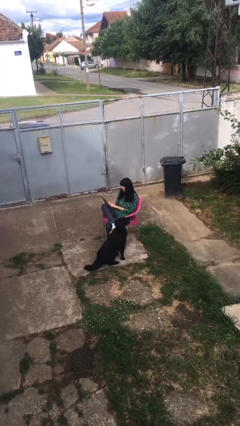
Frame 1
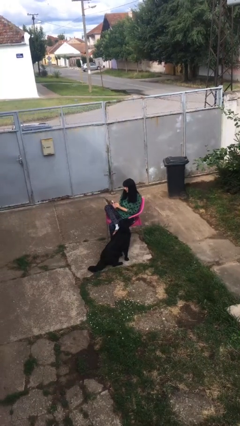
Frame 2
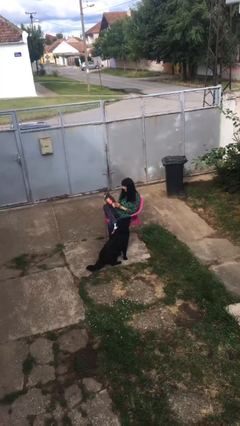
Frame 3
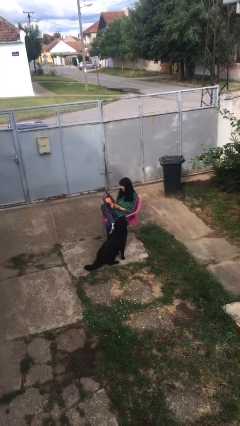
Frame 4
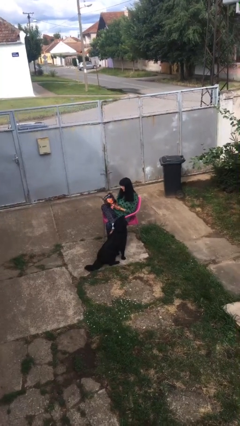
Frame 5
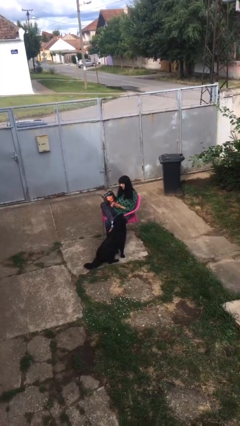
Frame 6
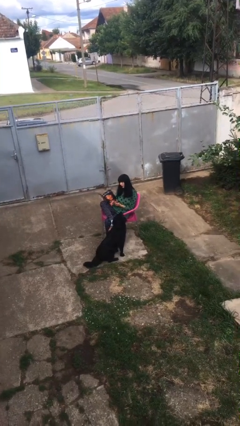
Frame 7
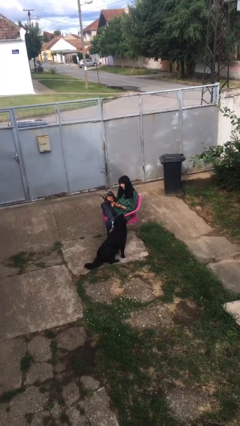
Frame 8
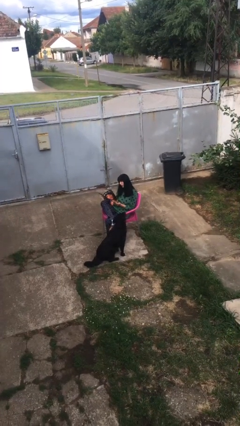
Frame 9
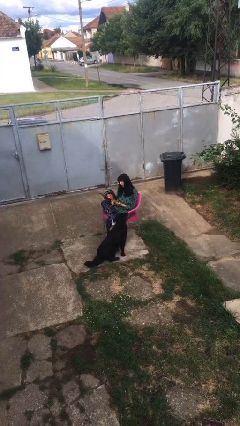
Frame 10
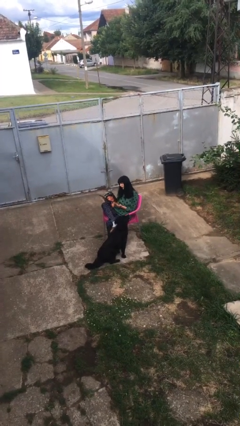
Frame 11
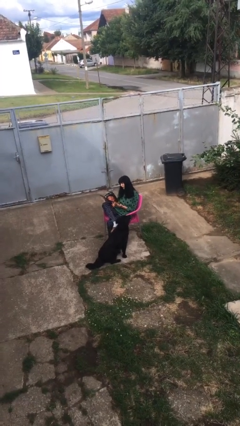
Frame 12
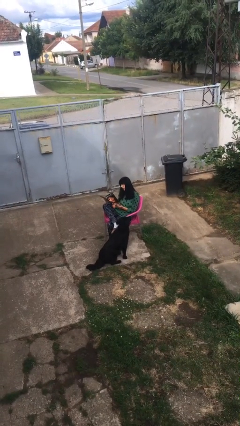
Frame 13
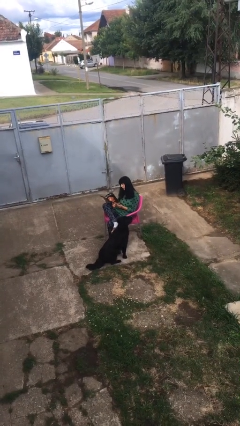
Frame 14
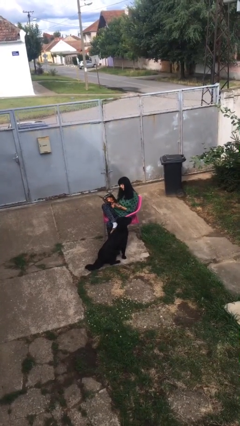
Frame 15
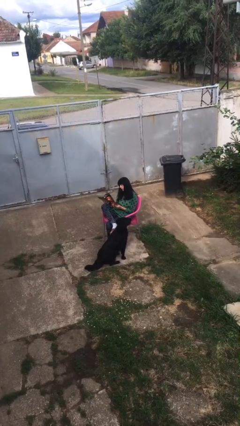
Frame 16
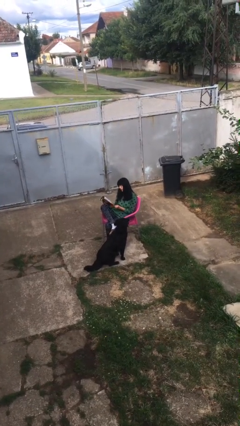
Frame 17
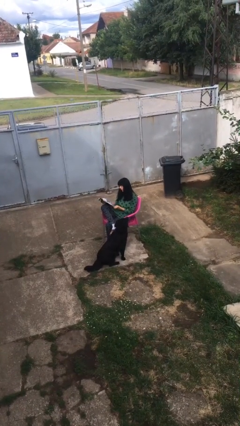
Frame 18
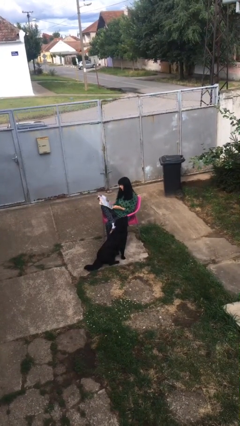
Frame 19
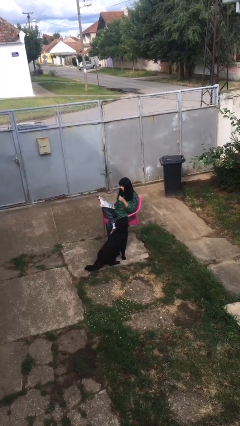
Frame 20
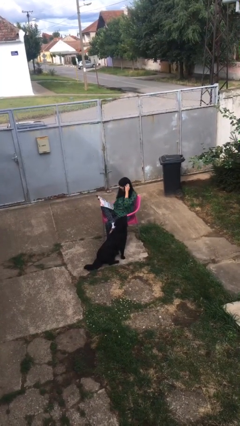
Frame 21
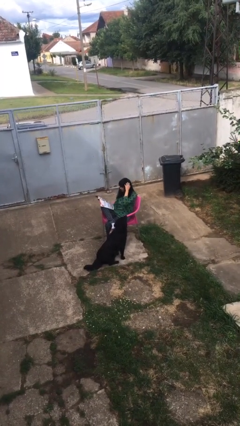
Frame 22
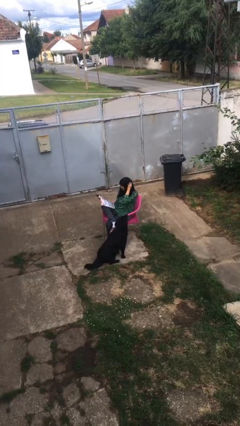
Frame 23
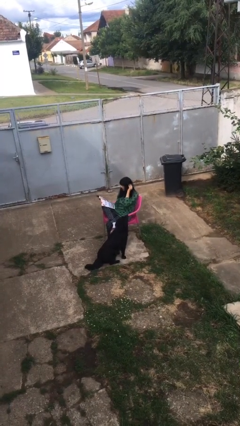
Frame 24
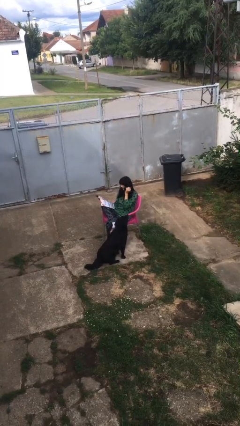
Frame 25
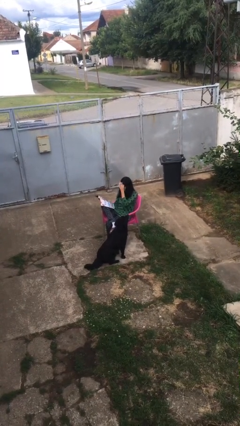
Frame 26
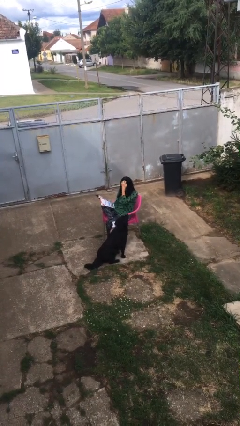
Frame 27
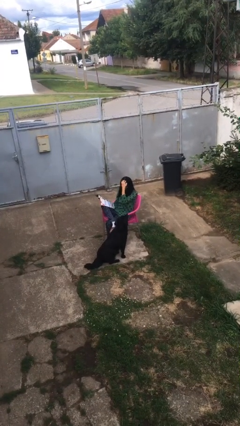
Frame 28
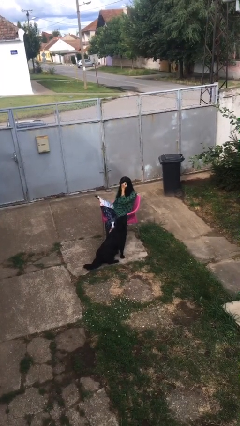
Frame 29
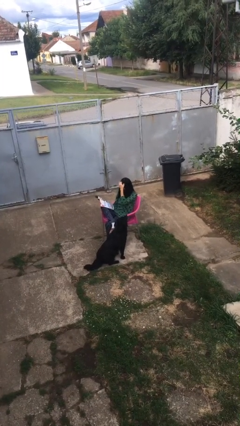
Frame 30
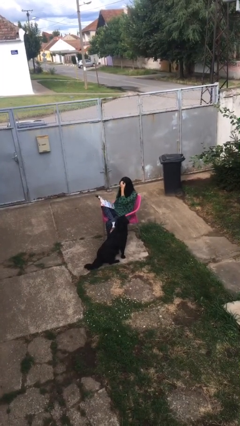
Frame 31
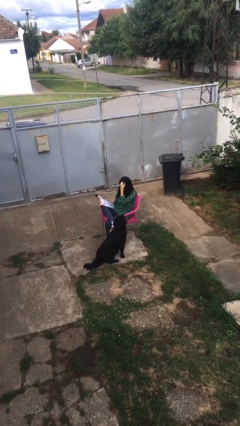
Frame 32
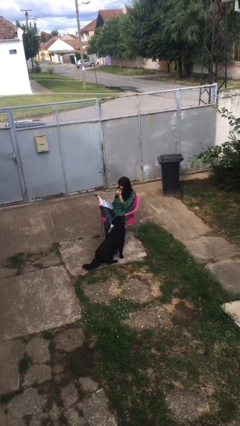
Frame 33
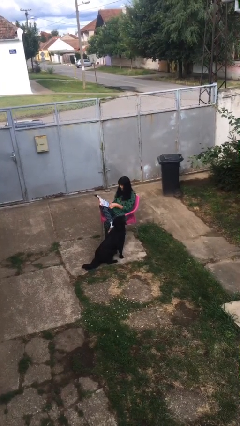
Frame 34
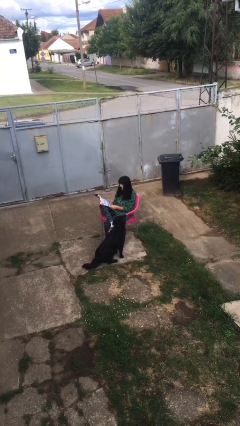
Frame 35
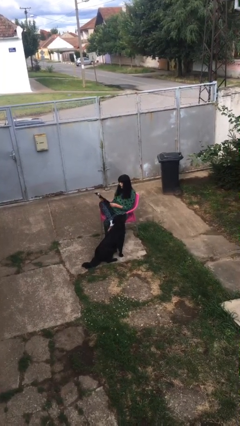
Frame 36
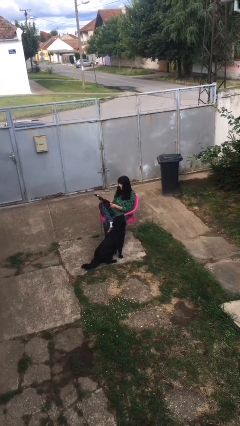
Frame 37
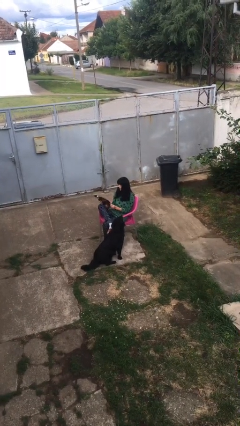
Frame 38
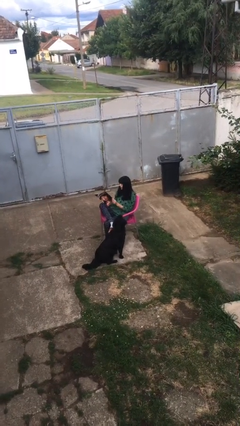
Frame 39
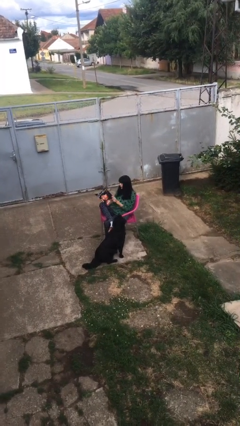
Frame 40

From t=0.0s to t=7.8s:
person reads document

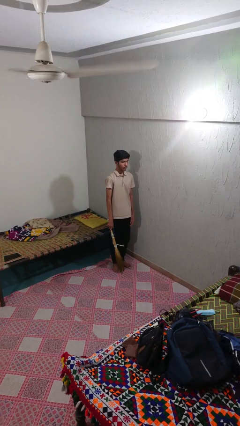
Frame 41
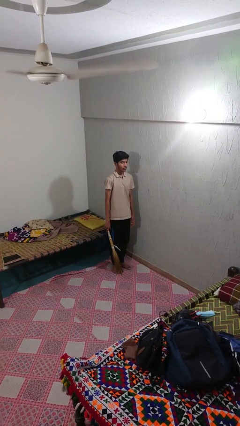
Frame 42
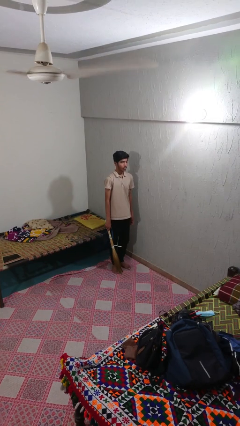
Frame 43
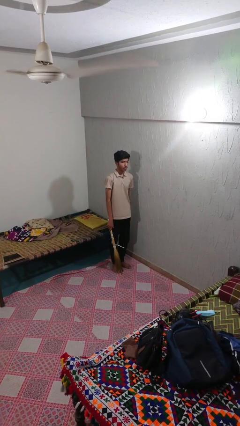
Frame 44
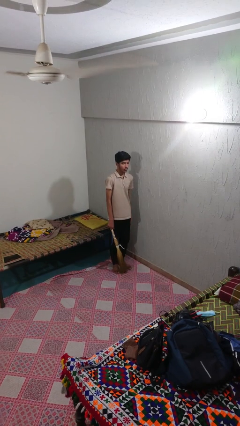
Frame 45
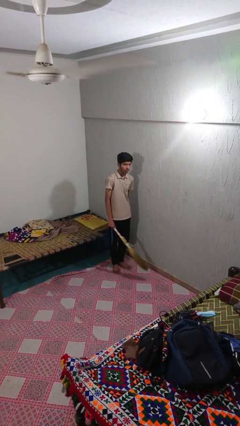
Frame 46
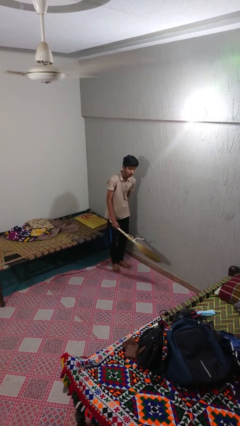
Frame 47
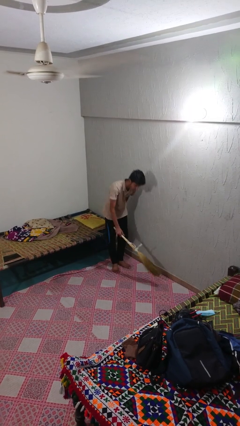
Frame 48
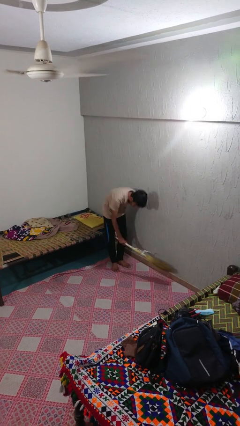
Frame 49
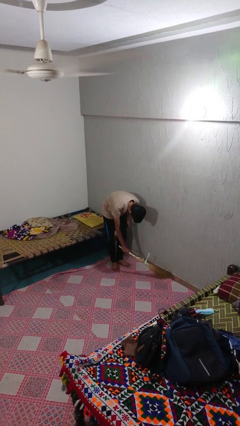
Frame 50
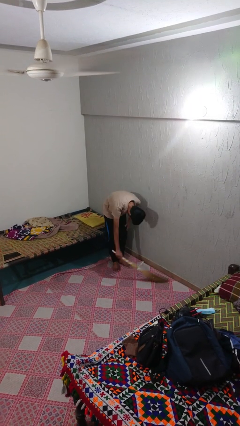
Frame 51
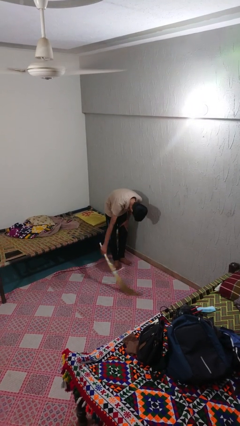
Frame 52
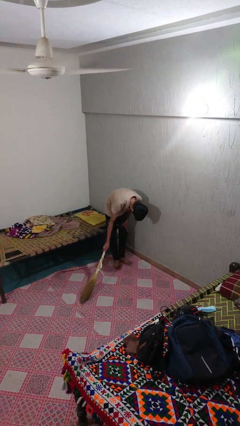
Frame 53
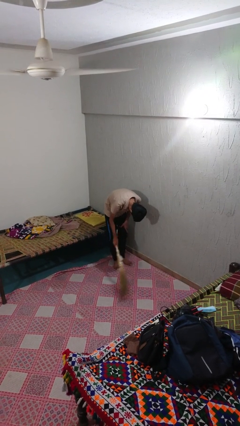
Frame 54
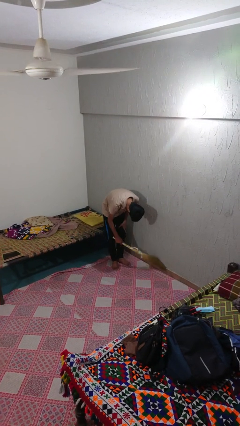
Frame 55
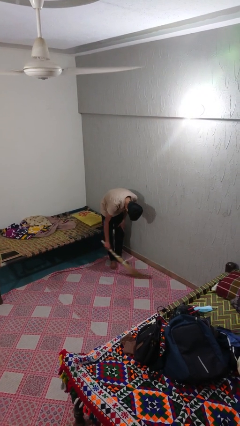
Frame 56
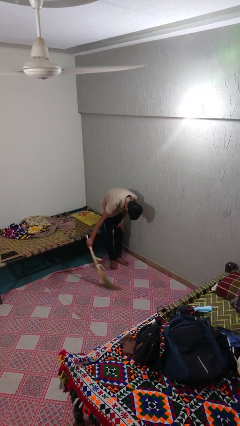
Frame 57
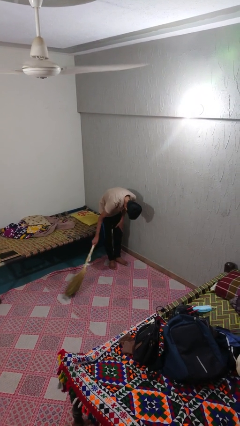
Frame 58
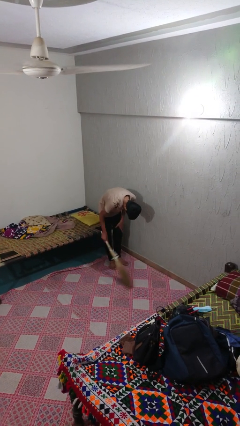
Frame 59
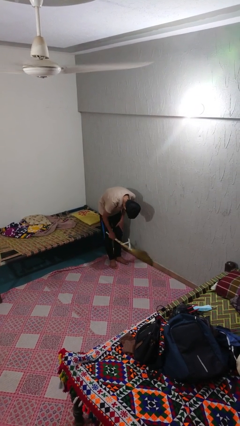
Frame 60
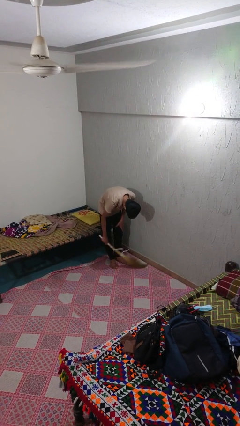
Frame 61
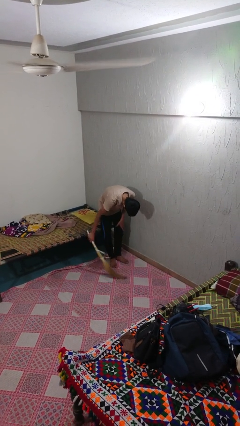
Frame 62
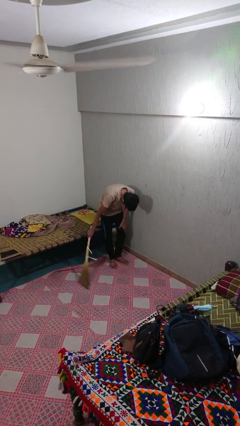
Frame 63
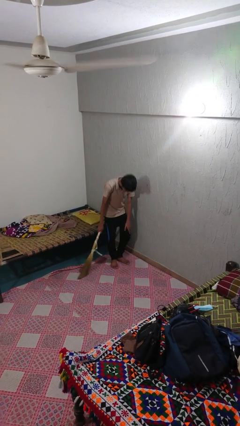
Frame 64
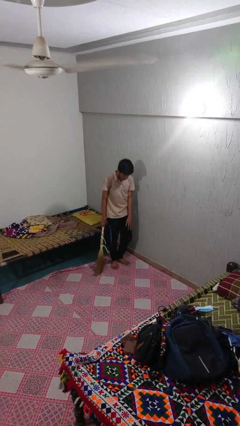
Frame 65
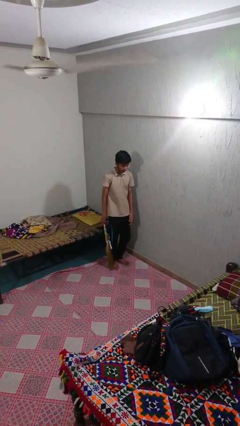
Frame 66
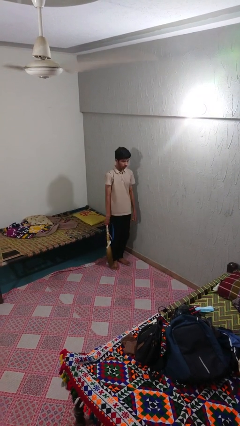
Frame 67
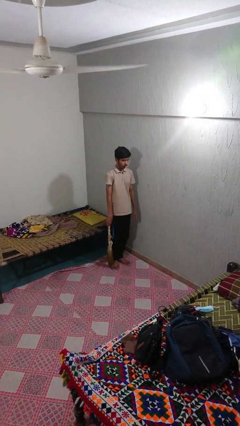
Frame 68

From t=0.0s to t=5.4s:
person sweeps floor

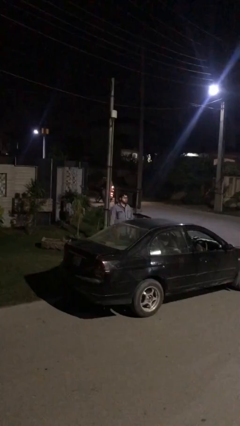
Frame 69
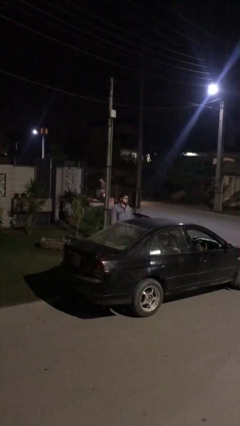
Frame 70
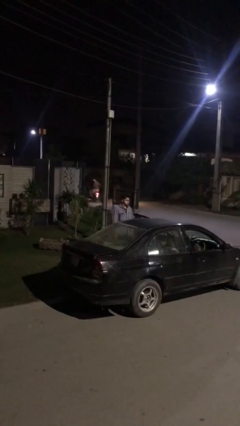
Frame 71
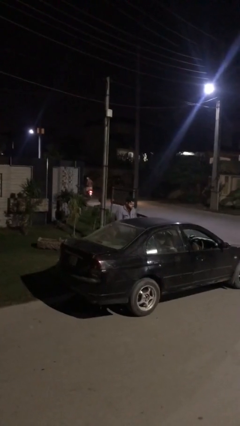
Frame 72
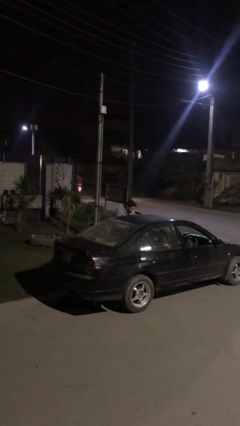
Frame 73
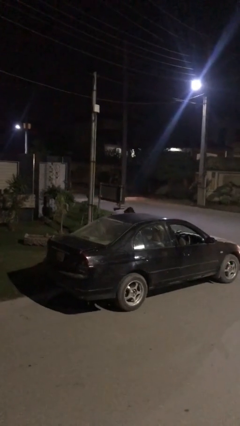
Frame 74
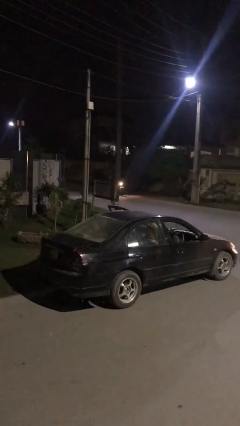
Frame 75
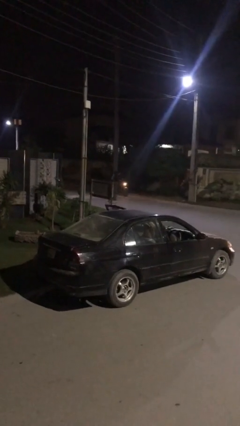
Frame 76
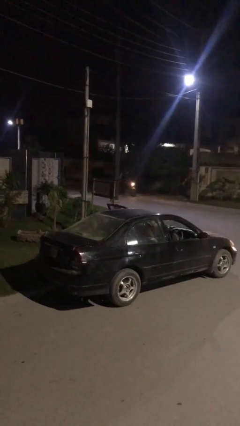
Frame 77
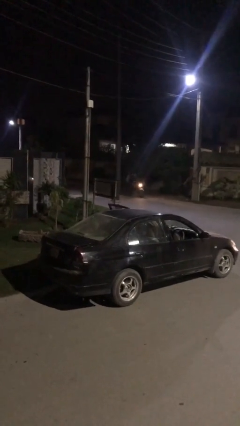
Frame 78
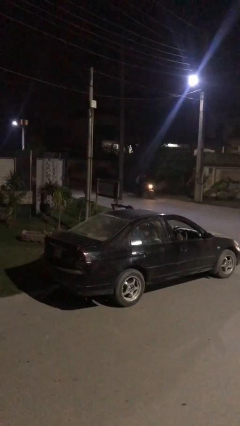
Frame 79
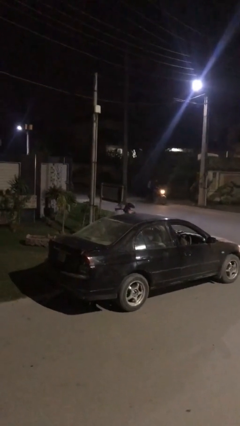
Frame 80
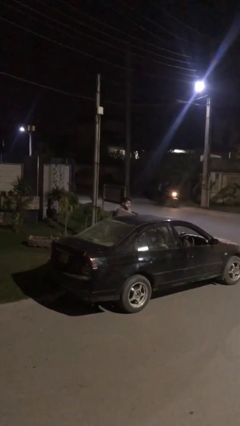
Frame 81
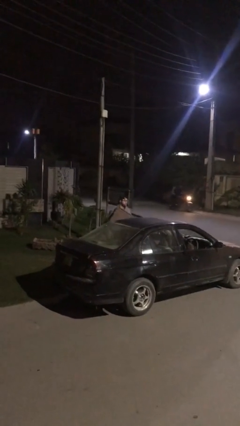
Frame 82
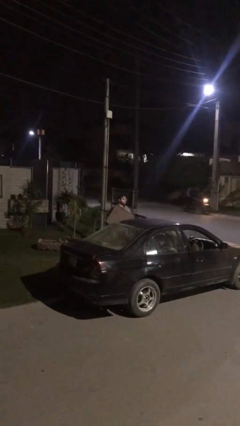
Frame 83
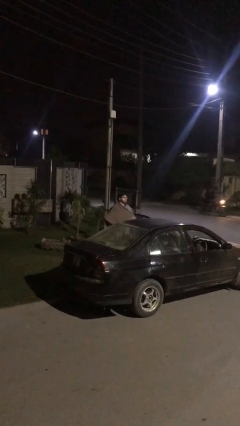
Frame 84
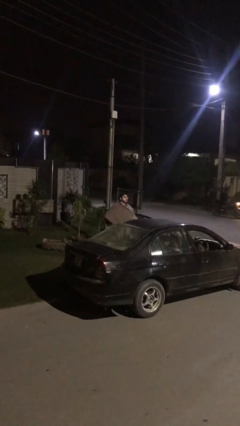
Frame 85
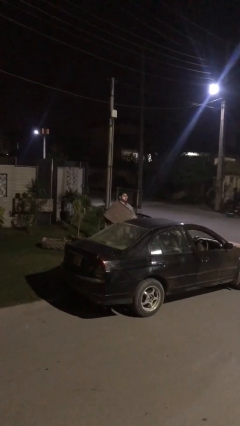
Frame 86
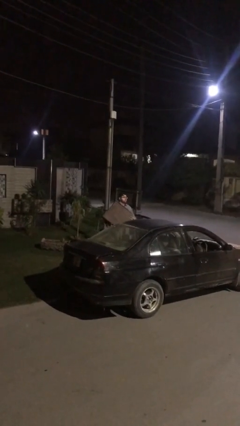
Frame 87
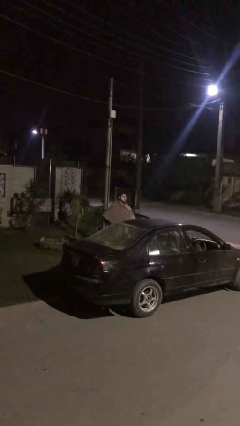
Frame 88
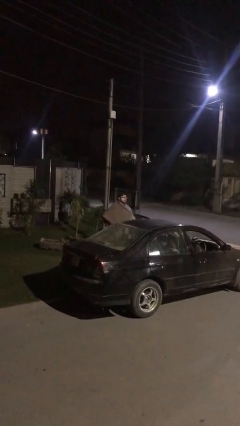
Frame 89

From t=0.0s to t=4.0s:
person unloads car

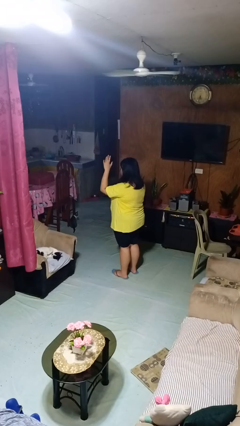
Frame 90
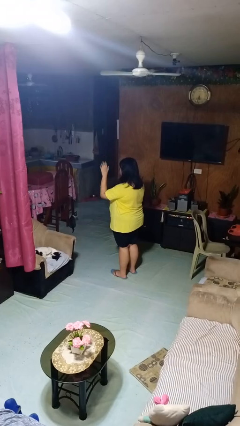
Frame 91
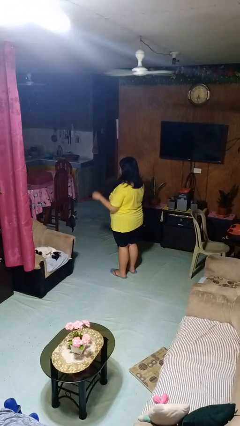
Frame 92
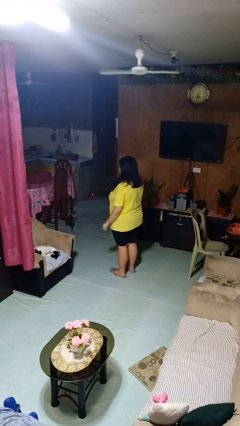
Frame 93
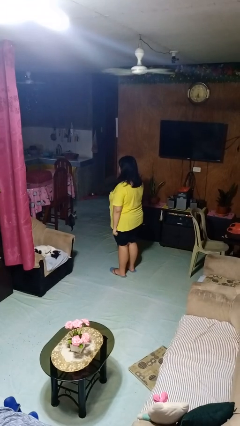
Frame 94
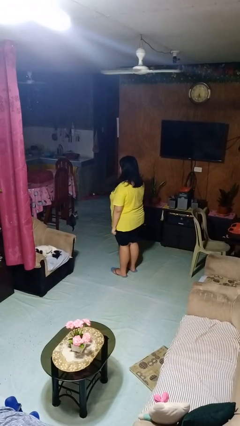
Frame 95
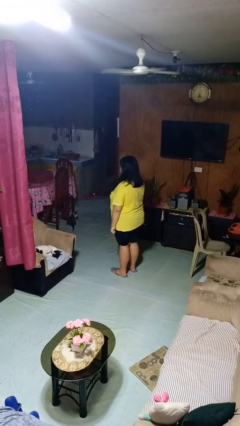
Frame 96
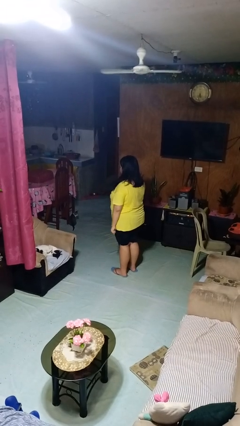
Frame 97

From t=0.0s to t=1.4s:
person gestures lower hand
